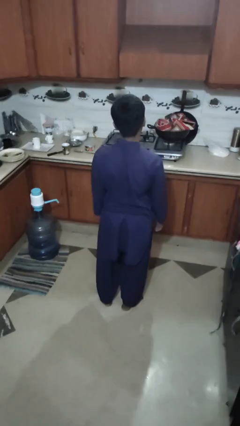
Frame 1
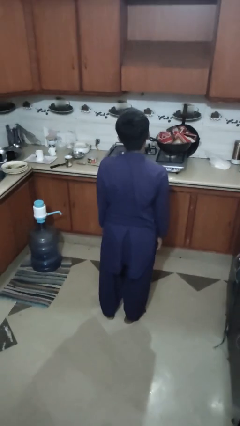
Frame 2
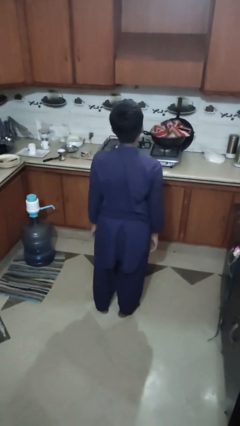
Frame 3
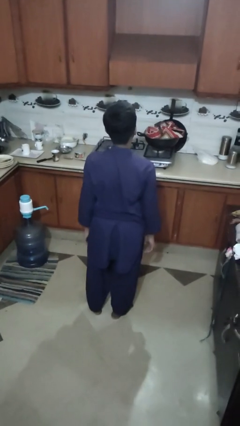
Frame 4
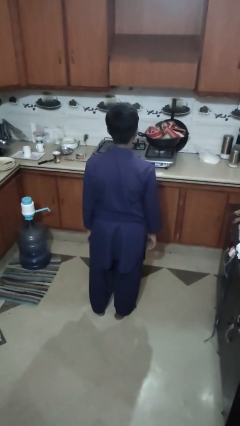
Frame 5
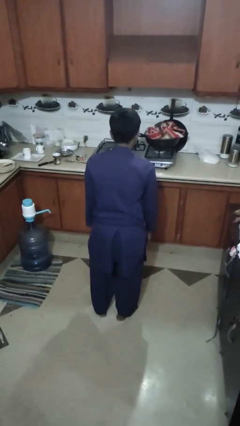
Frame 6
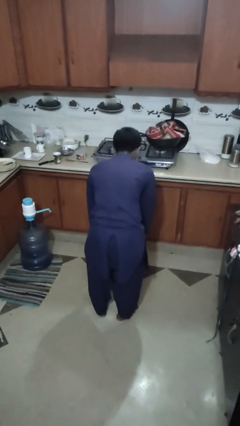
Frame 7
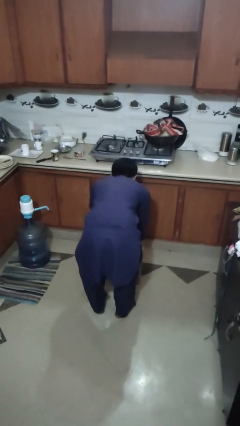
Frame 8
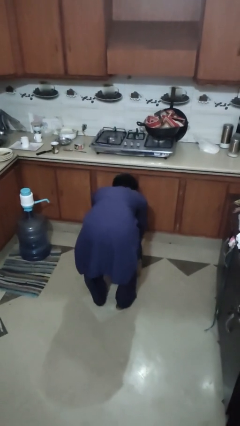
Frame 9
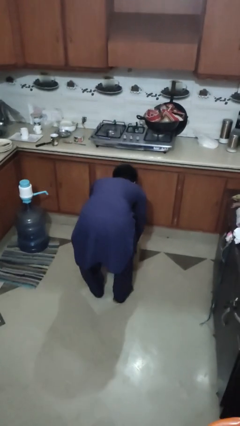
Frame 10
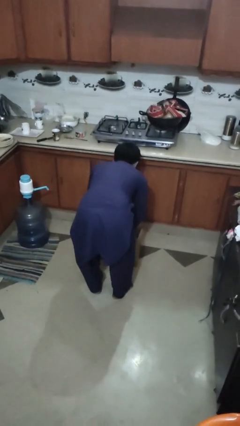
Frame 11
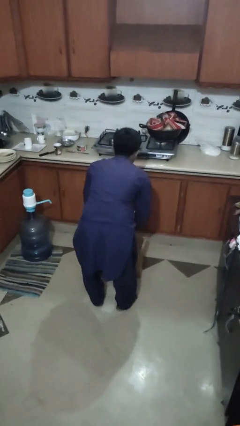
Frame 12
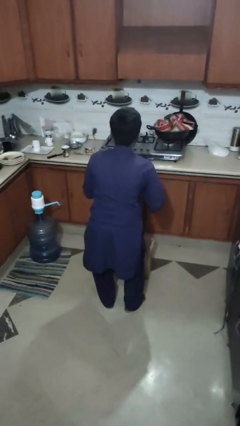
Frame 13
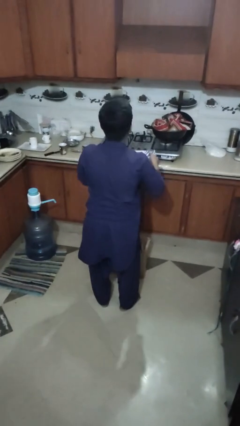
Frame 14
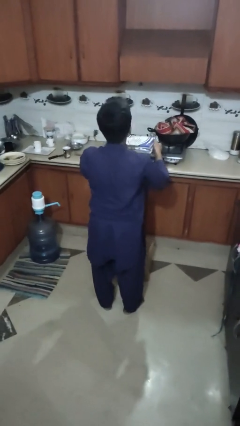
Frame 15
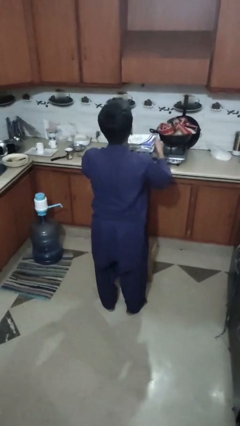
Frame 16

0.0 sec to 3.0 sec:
person takes object from box

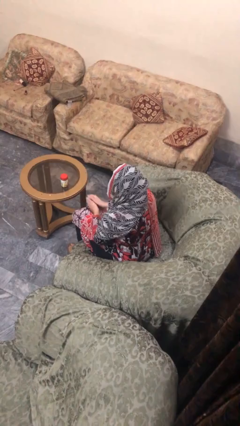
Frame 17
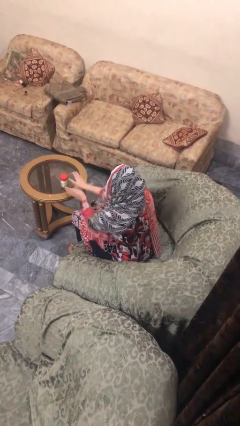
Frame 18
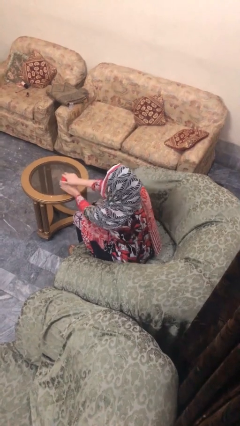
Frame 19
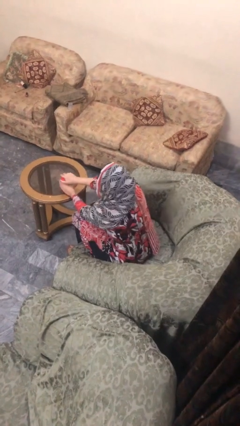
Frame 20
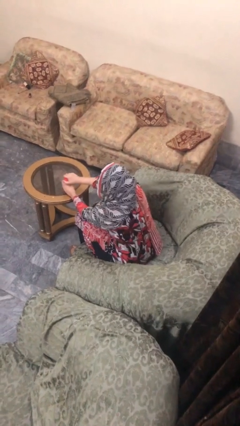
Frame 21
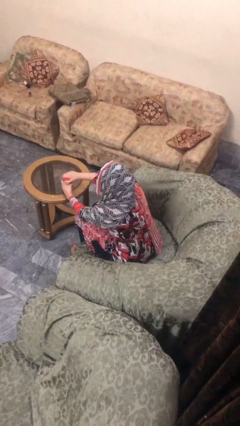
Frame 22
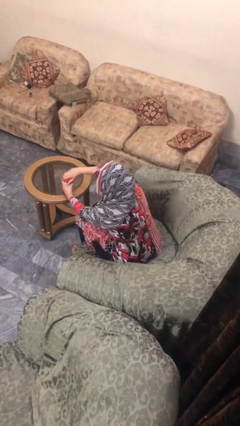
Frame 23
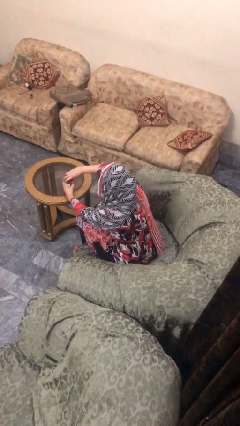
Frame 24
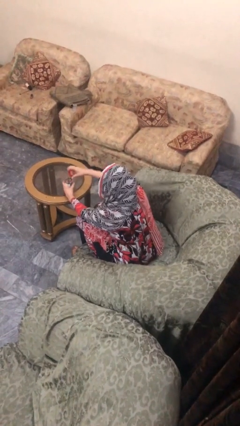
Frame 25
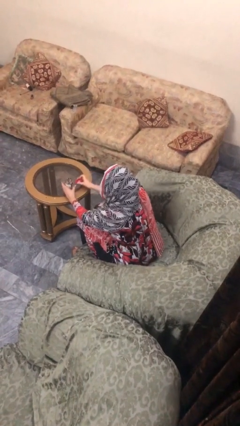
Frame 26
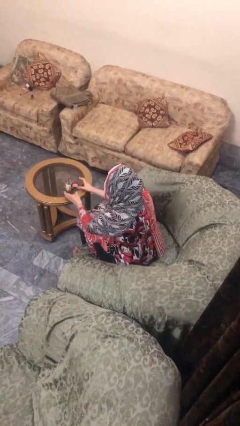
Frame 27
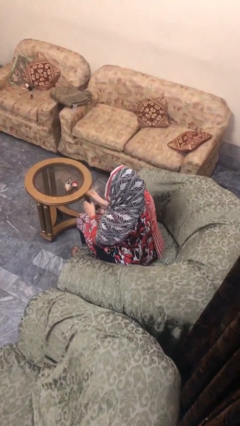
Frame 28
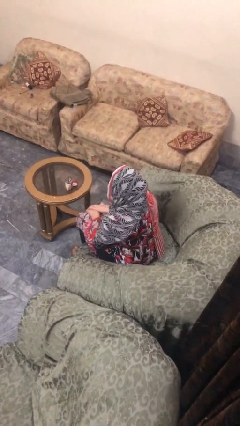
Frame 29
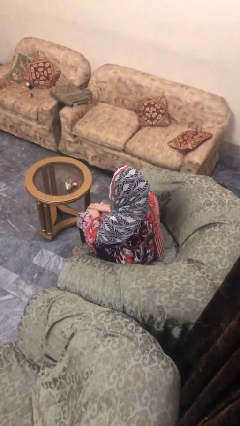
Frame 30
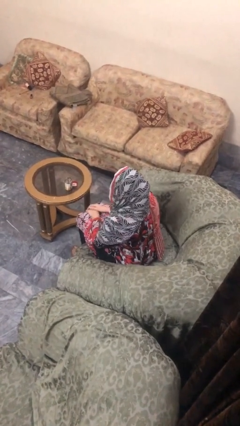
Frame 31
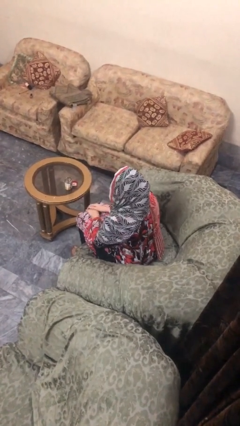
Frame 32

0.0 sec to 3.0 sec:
person opens jar

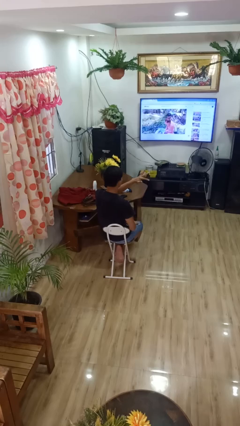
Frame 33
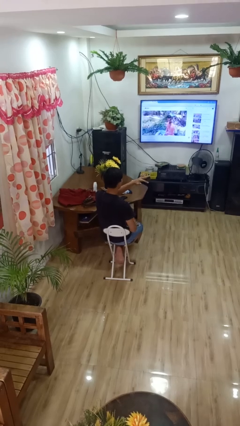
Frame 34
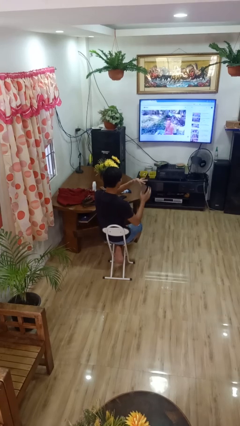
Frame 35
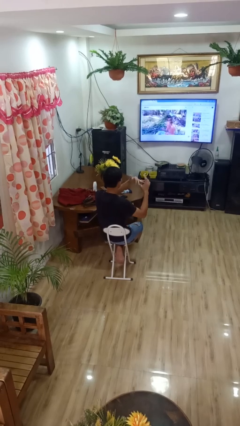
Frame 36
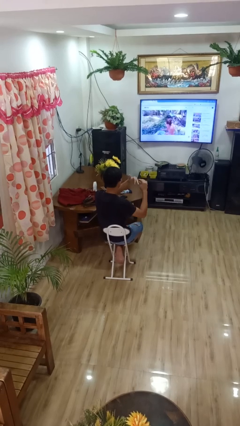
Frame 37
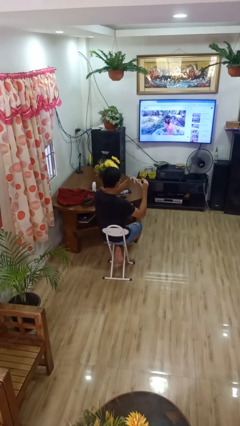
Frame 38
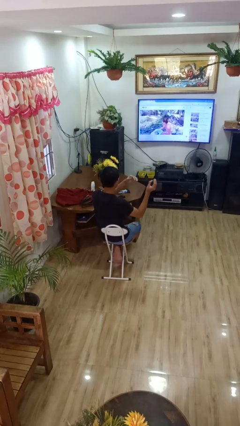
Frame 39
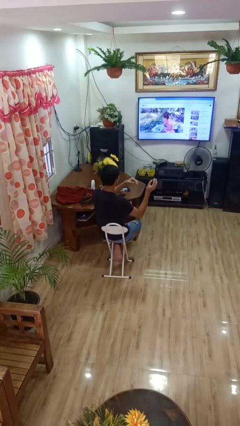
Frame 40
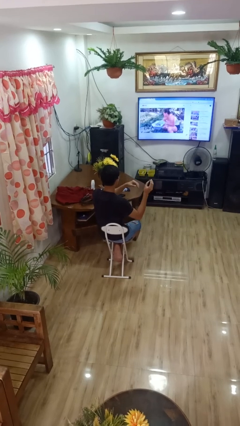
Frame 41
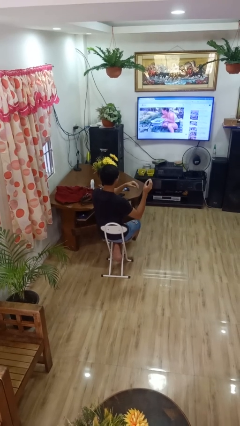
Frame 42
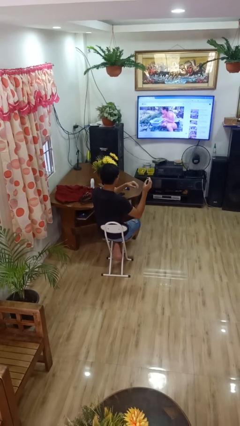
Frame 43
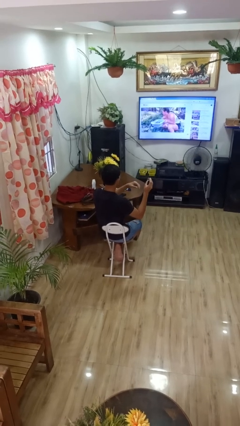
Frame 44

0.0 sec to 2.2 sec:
person takes off ring

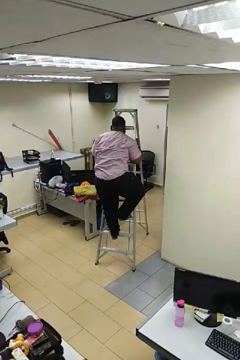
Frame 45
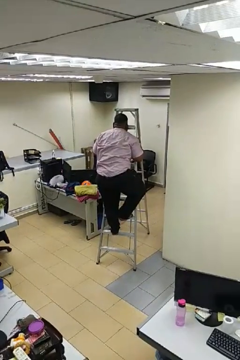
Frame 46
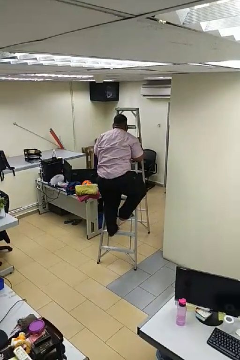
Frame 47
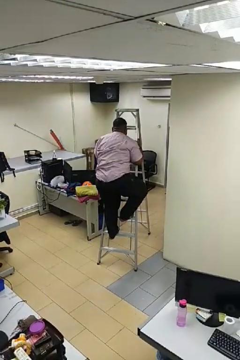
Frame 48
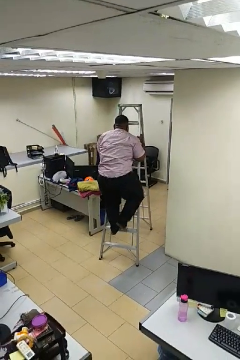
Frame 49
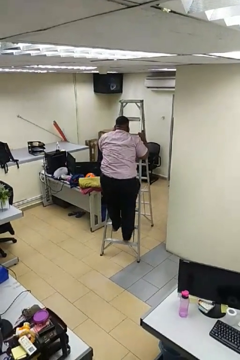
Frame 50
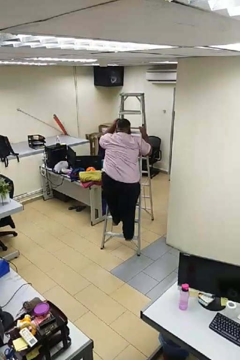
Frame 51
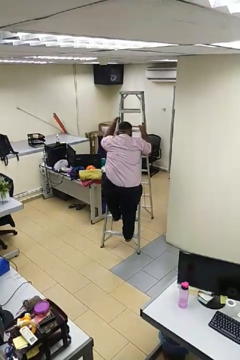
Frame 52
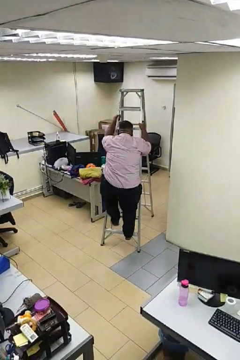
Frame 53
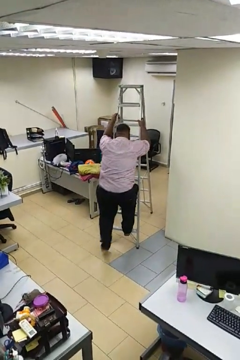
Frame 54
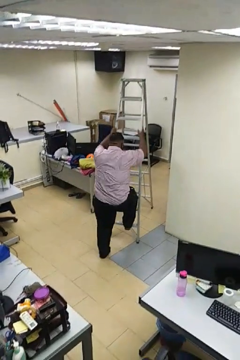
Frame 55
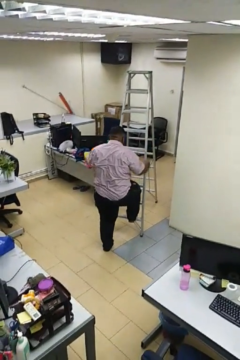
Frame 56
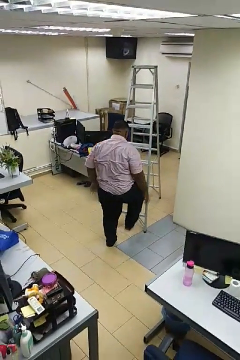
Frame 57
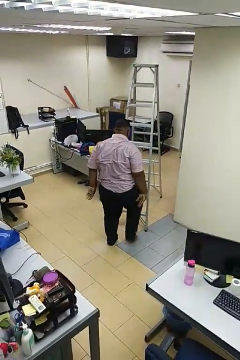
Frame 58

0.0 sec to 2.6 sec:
person climbs down ladder

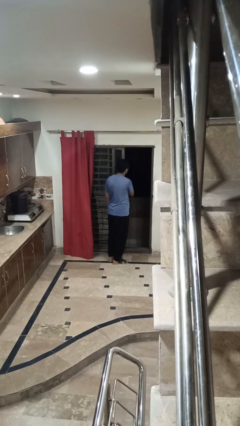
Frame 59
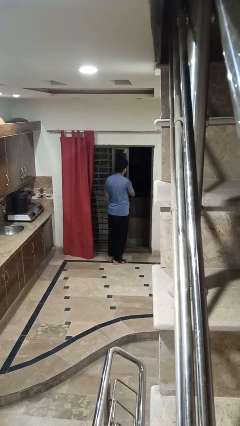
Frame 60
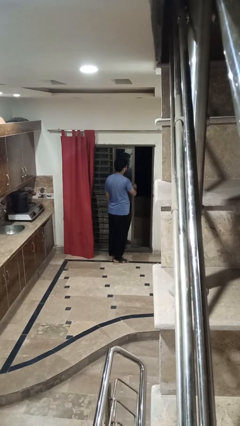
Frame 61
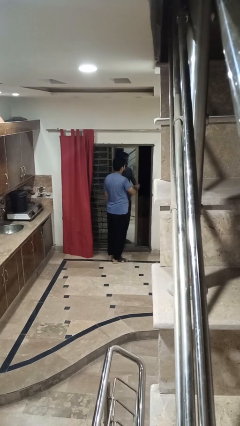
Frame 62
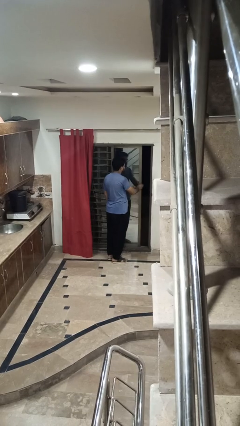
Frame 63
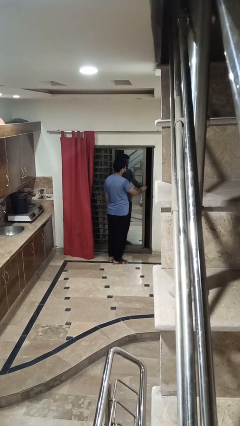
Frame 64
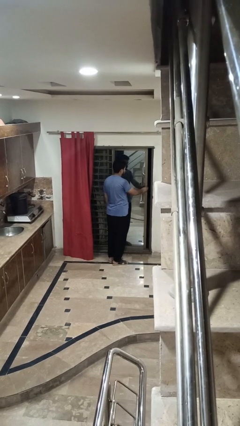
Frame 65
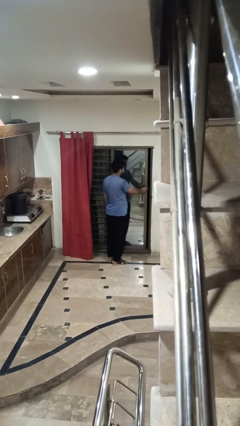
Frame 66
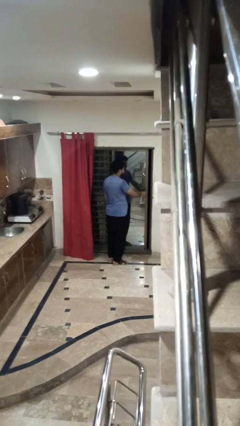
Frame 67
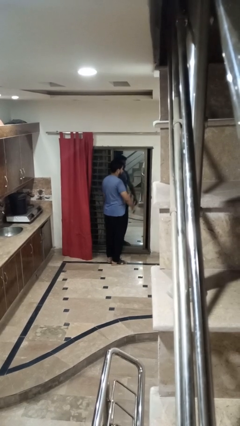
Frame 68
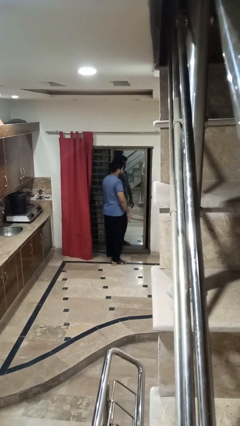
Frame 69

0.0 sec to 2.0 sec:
person closes sliding door

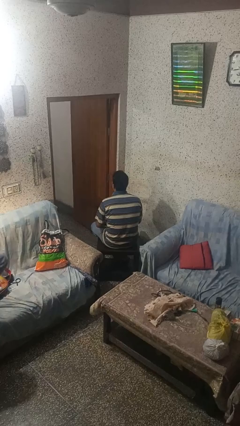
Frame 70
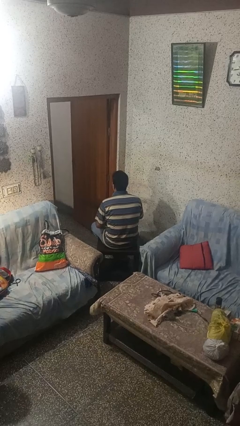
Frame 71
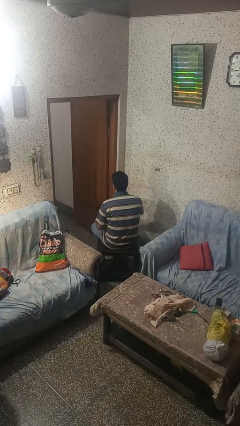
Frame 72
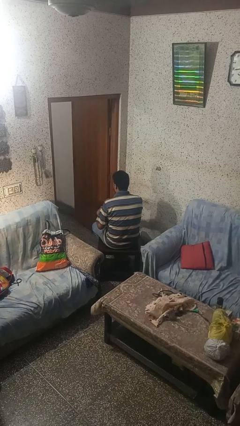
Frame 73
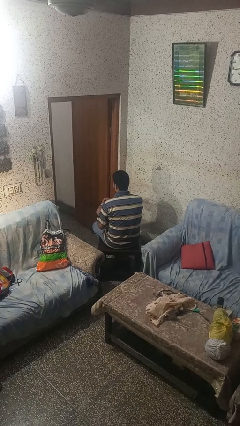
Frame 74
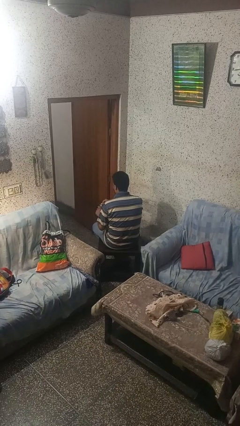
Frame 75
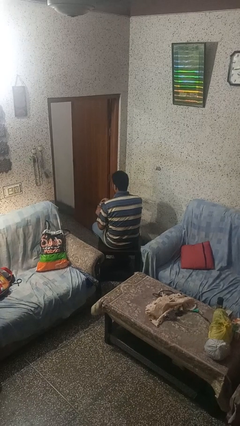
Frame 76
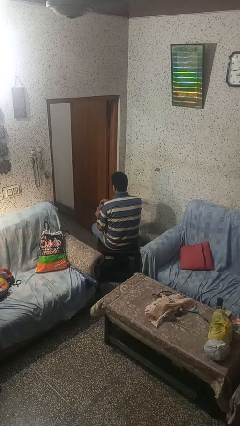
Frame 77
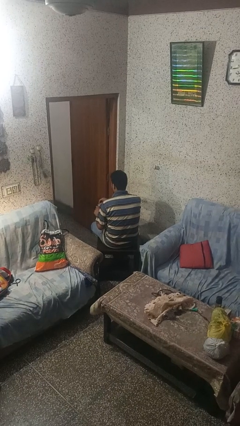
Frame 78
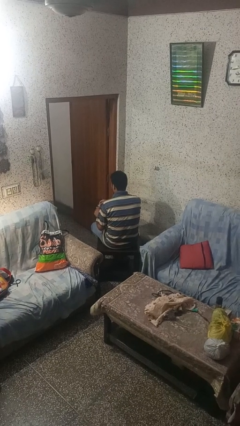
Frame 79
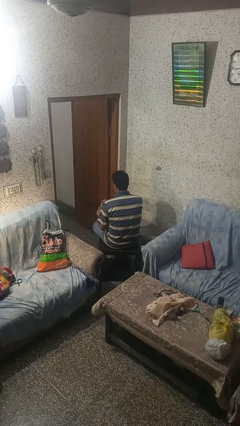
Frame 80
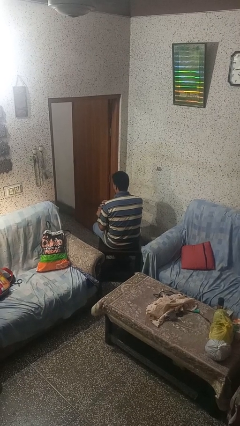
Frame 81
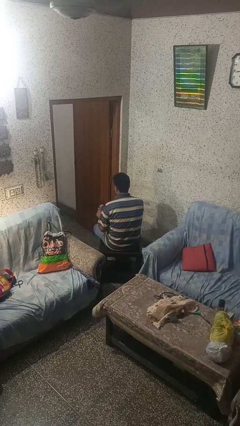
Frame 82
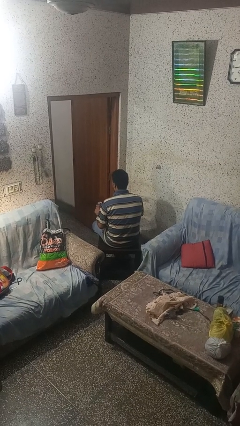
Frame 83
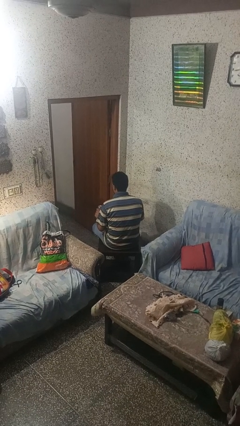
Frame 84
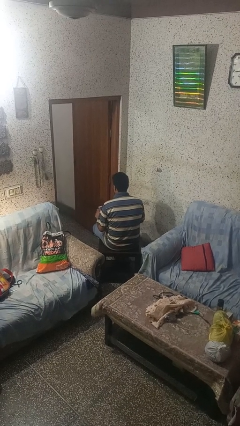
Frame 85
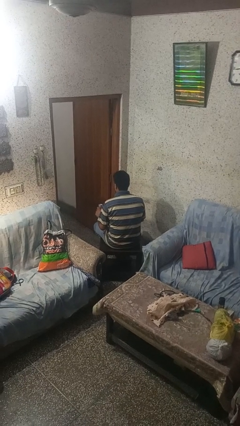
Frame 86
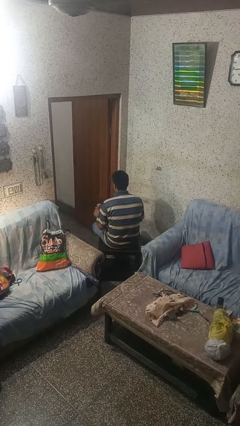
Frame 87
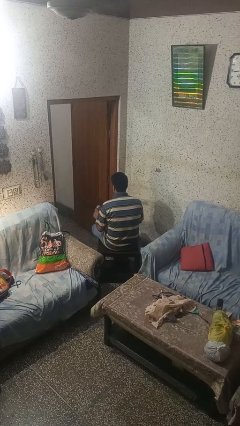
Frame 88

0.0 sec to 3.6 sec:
person opens beverage can

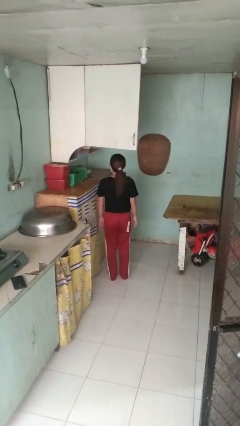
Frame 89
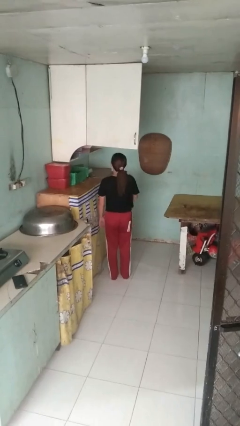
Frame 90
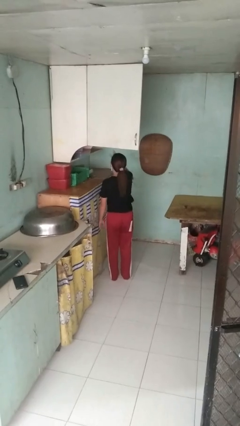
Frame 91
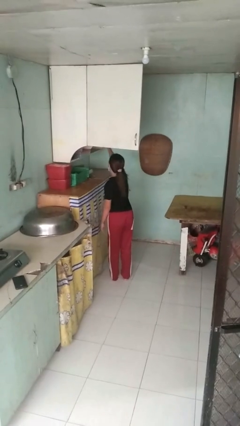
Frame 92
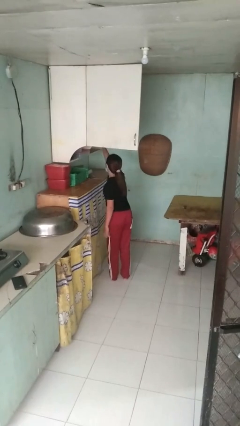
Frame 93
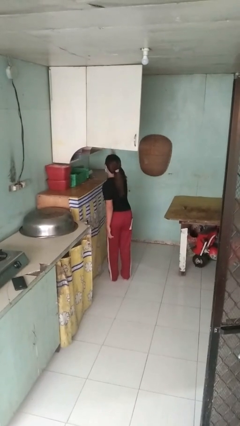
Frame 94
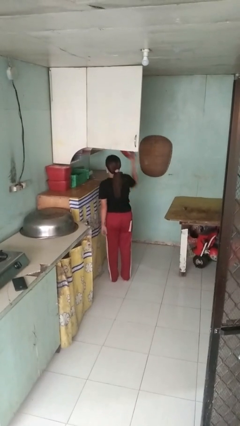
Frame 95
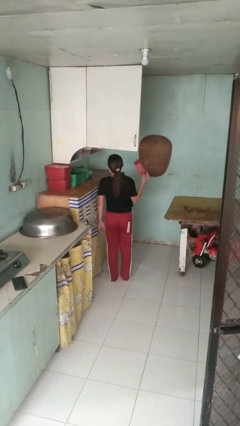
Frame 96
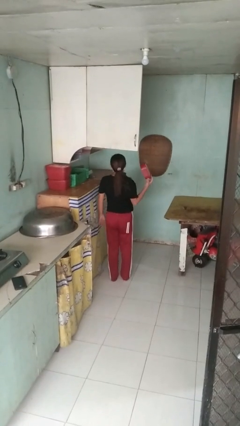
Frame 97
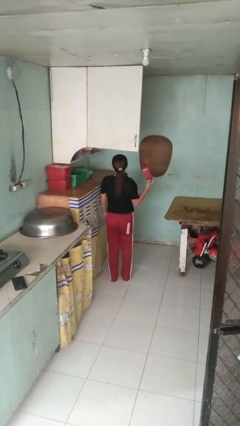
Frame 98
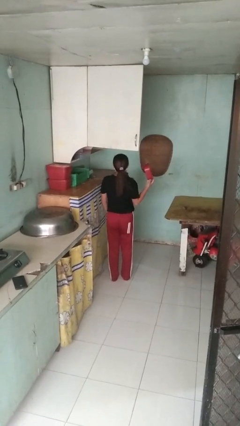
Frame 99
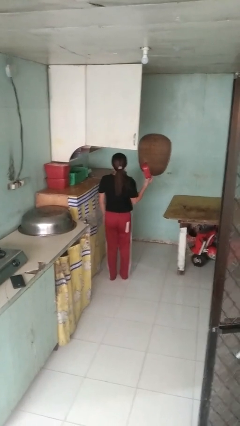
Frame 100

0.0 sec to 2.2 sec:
person takes object from cabinet
